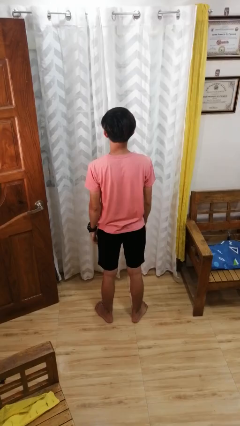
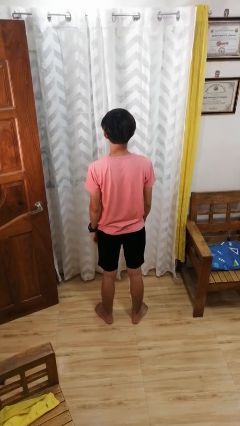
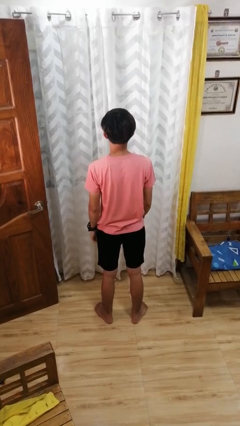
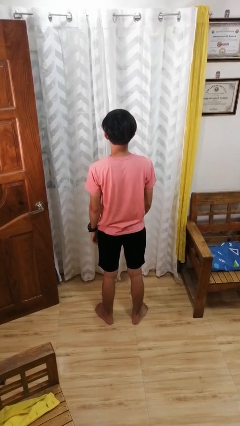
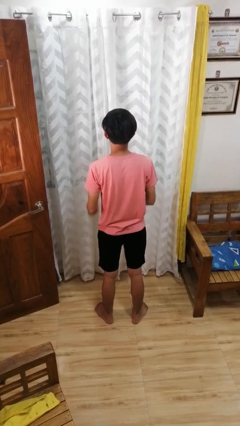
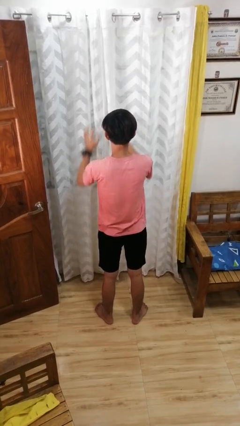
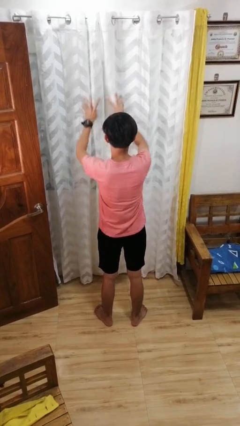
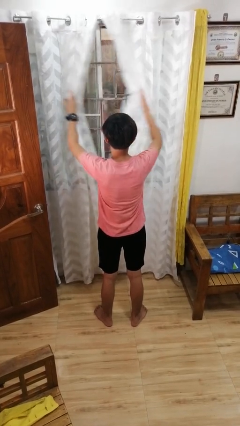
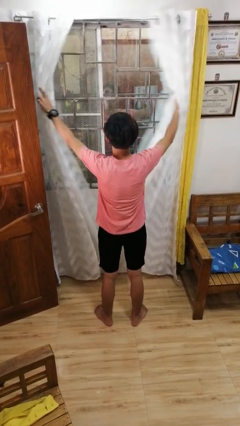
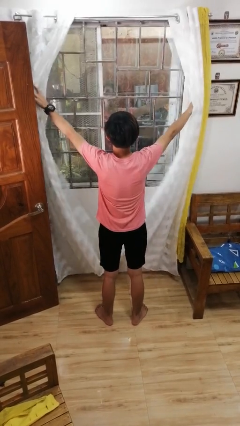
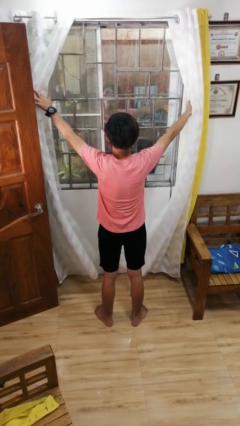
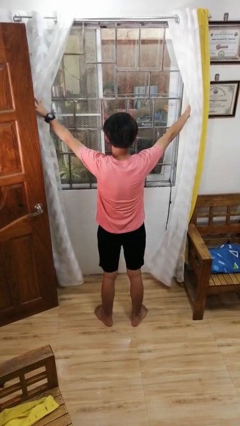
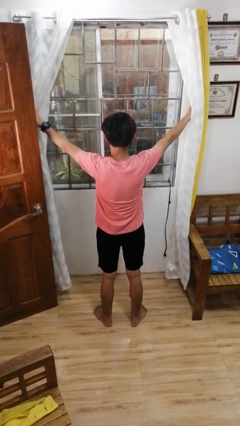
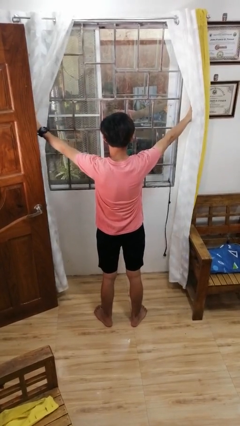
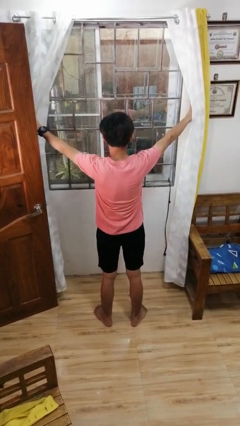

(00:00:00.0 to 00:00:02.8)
person opens curtains

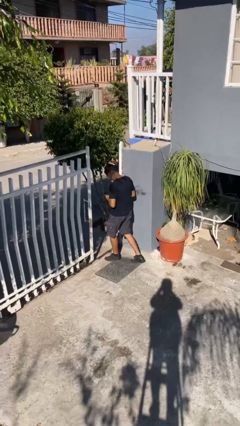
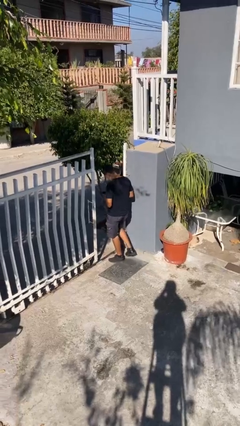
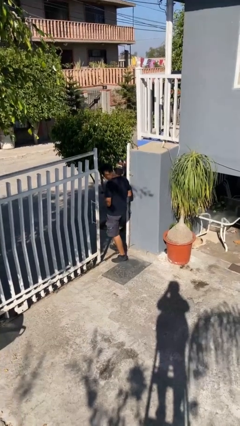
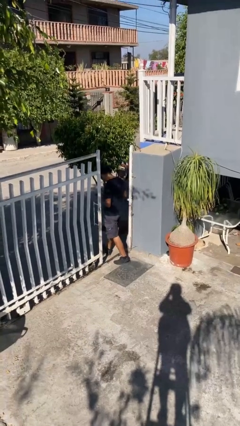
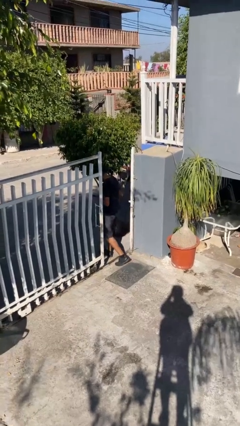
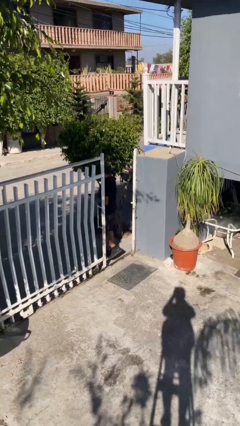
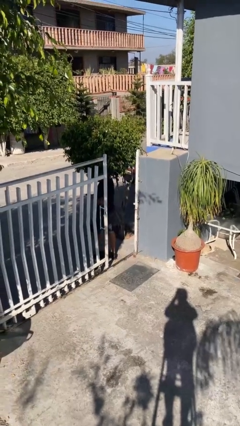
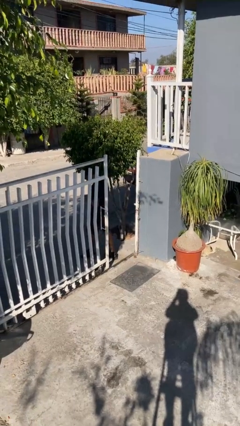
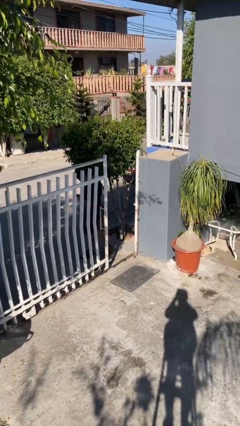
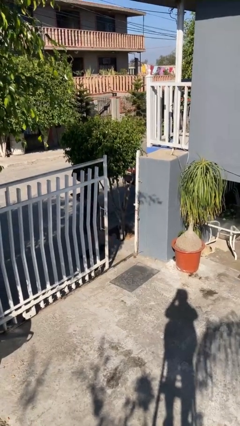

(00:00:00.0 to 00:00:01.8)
person exits scene through structure

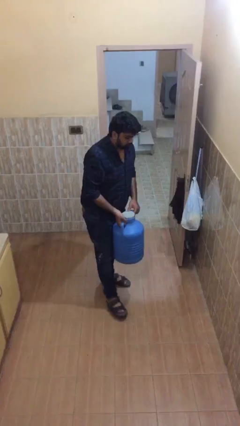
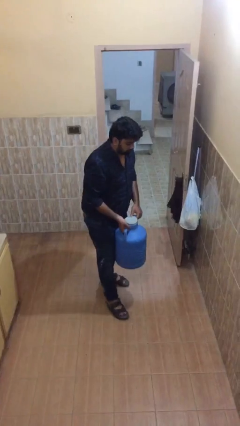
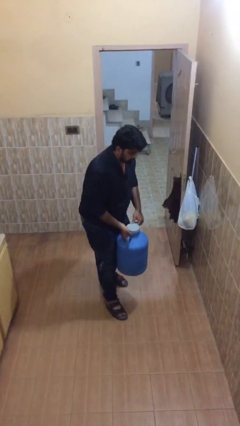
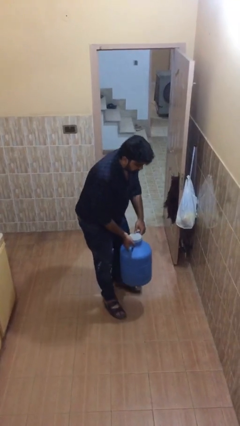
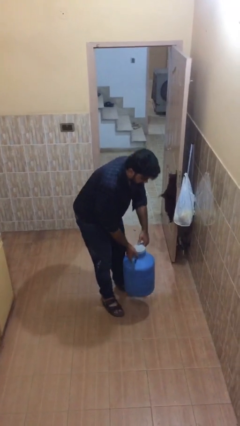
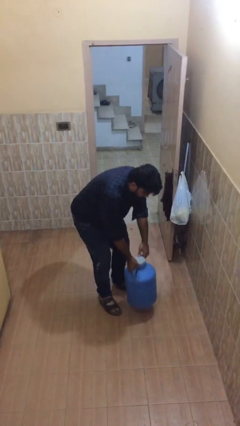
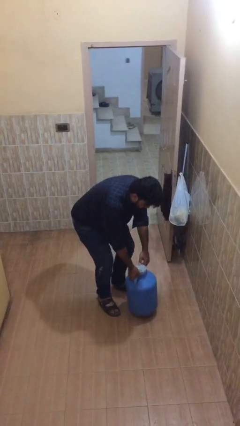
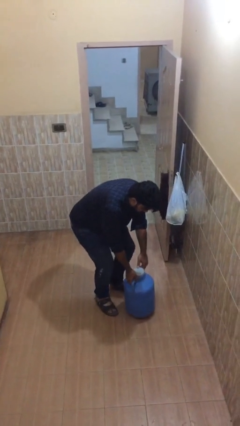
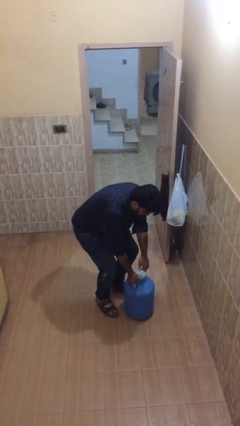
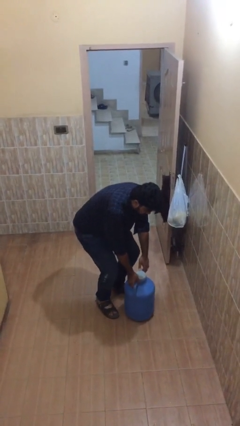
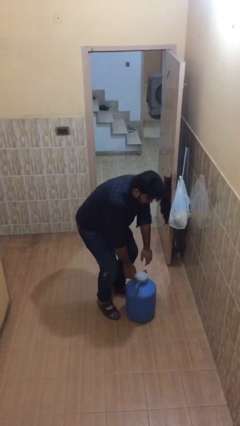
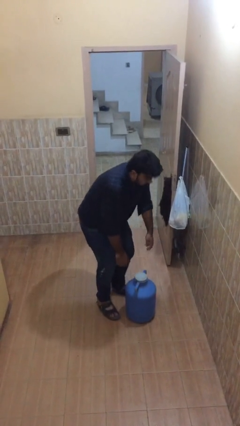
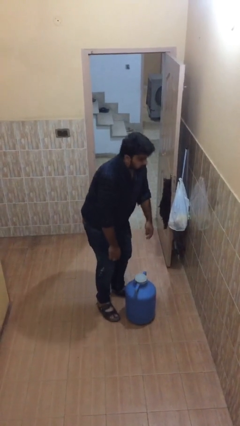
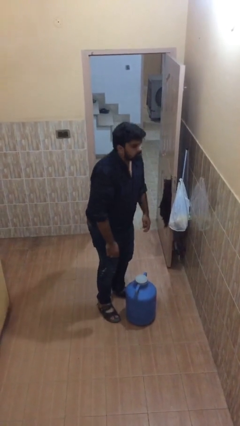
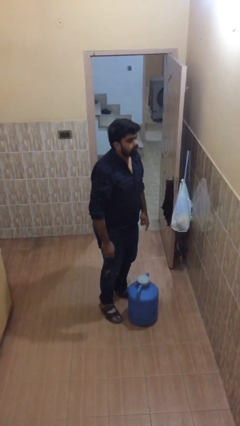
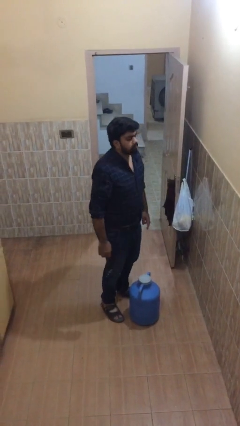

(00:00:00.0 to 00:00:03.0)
person puts down object on floor

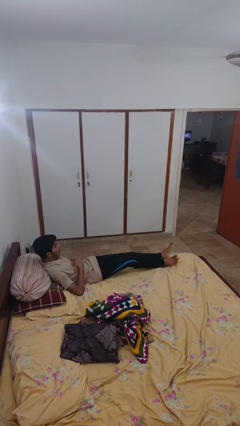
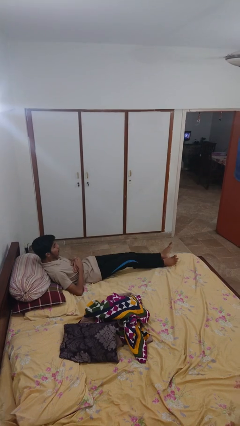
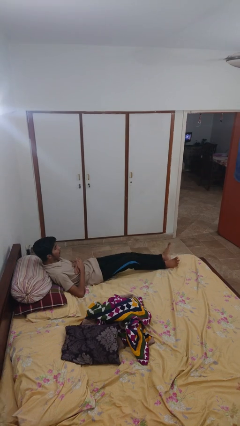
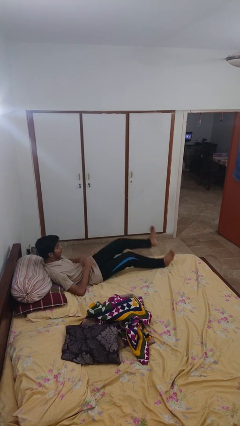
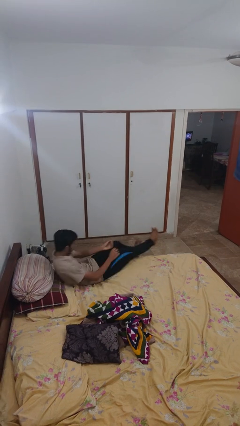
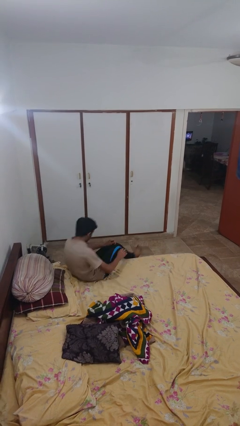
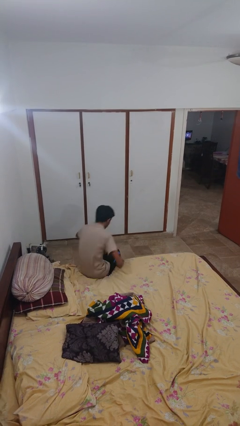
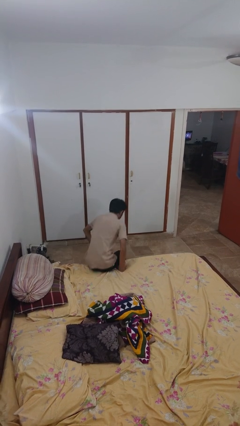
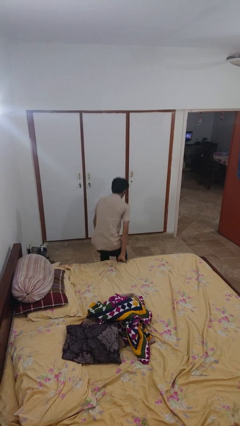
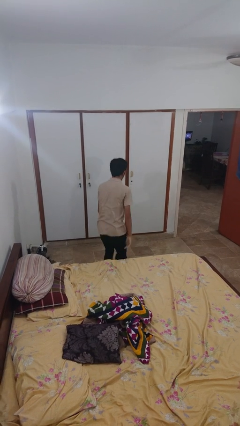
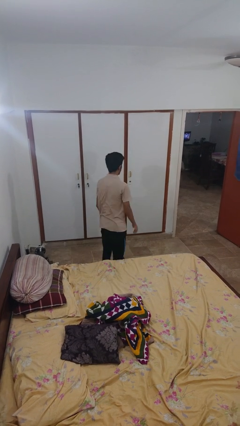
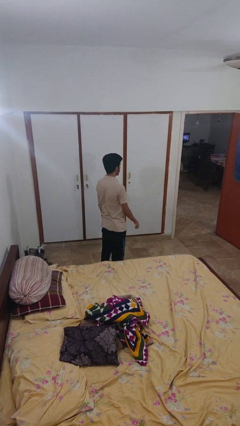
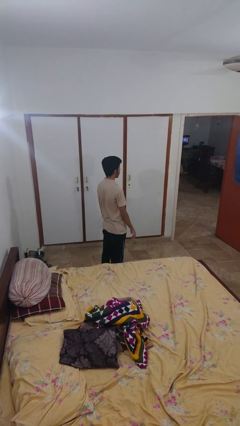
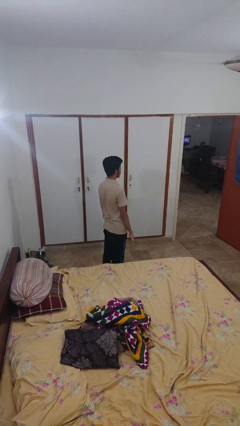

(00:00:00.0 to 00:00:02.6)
person stands up

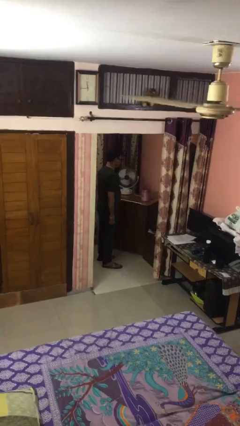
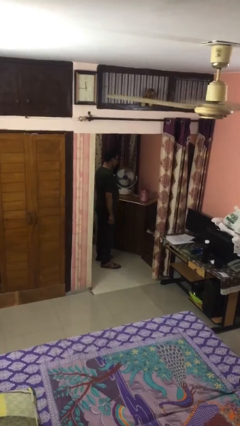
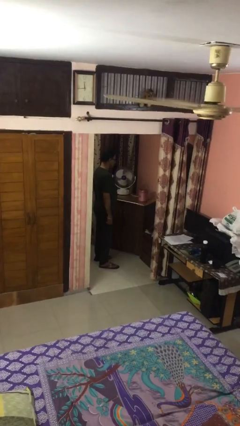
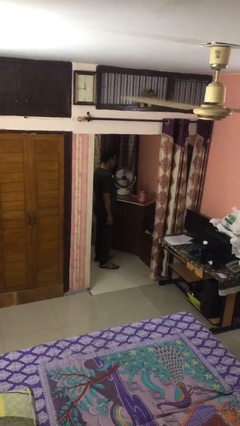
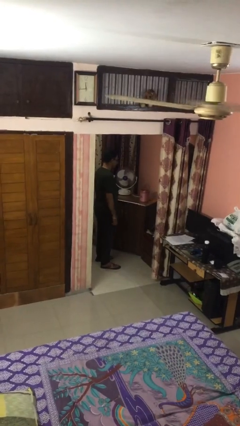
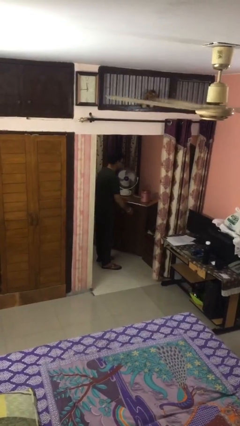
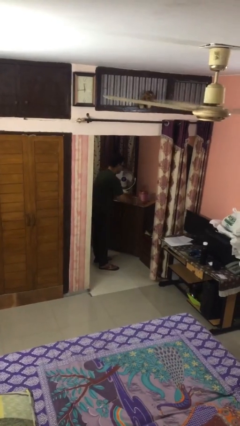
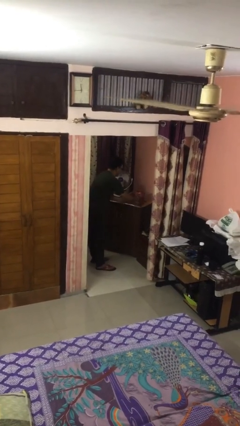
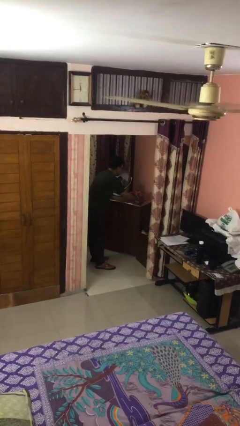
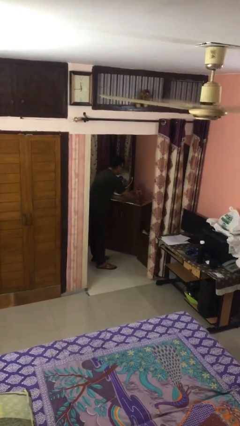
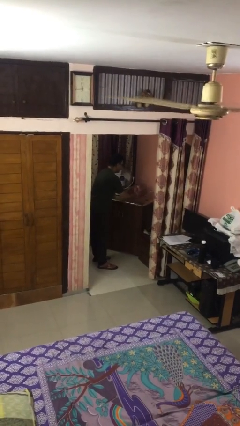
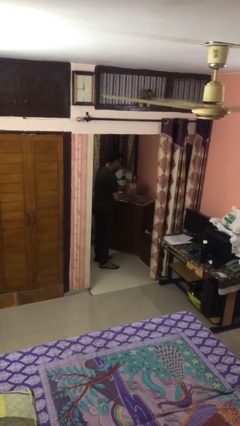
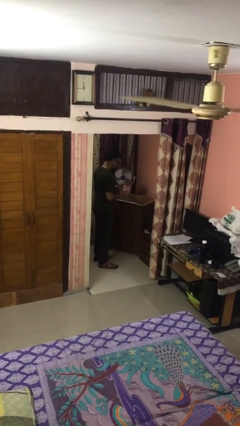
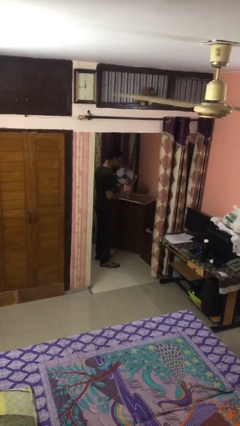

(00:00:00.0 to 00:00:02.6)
person picks up object from countertop

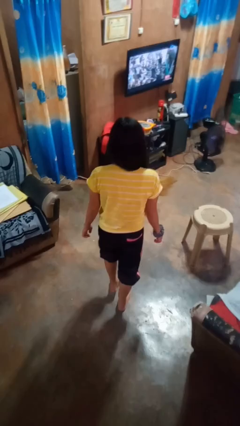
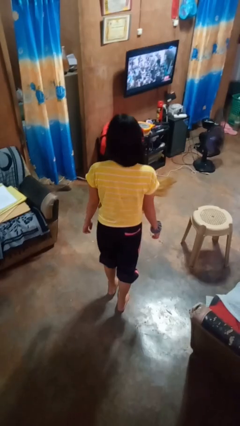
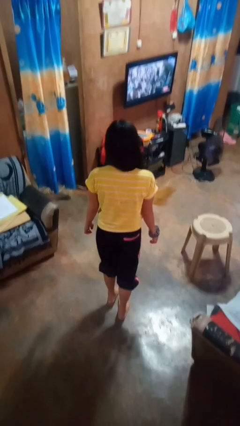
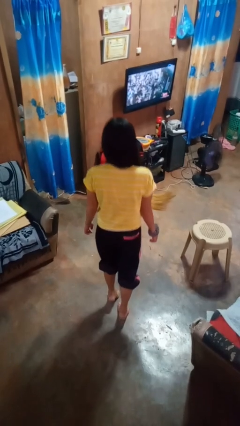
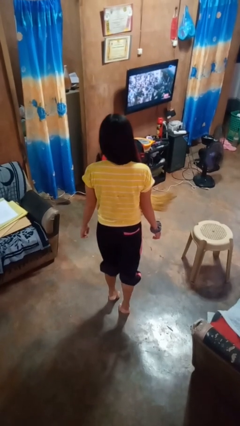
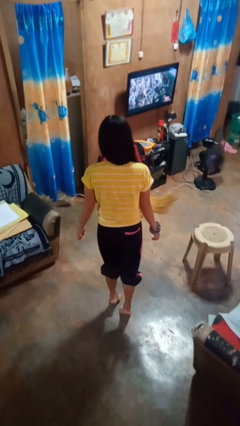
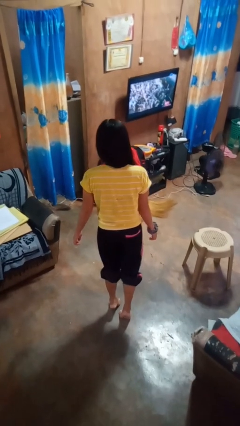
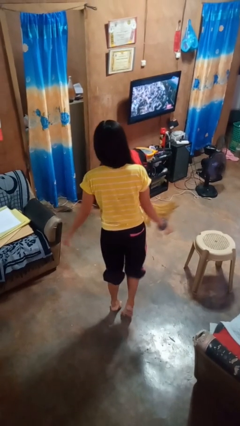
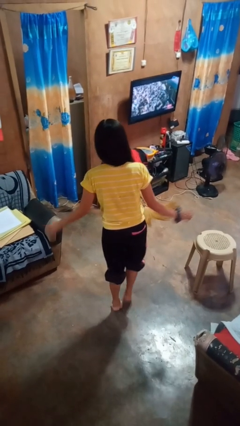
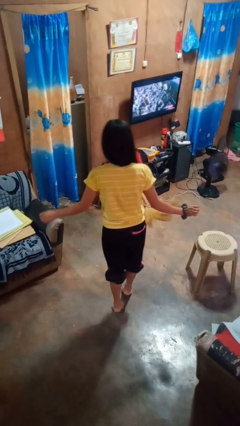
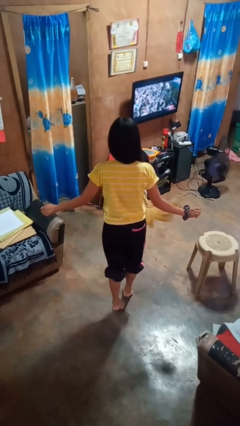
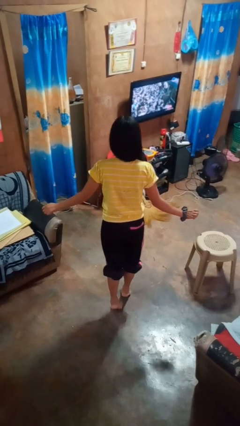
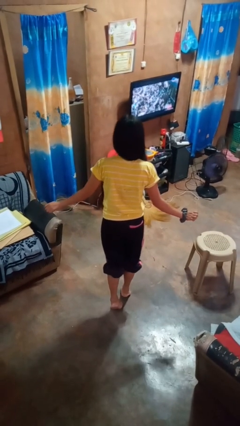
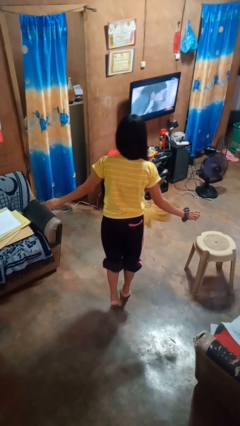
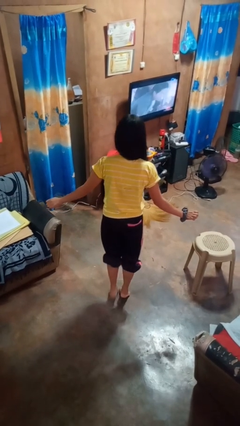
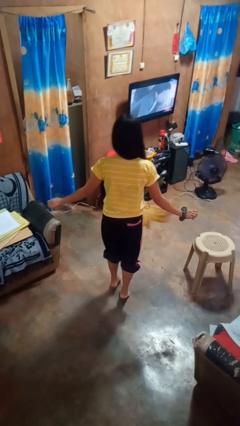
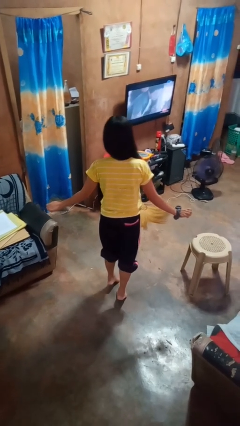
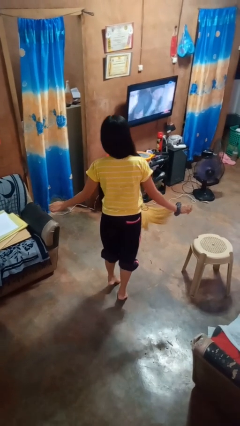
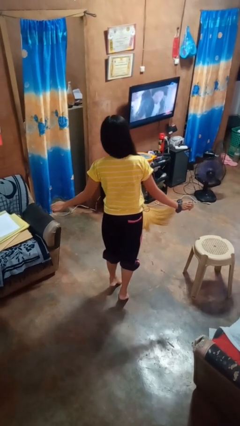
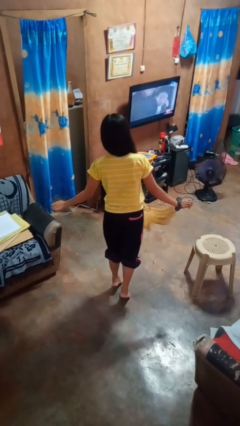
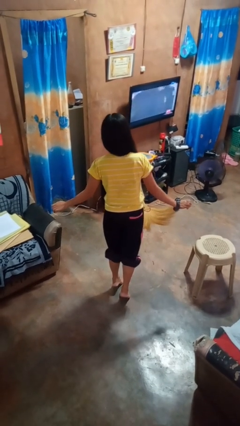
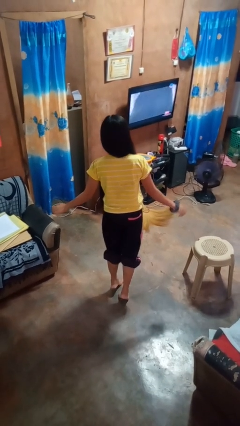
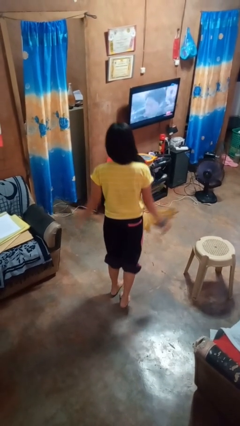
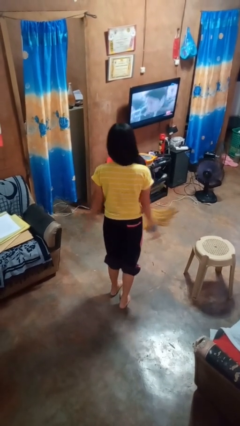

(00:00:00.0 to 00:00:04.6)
person walks tiptoe

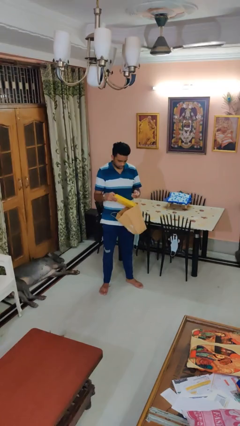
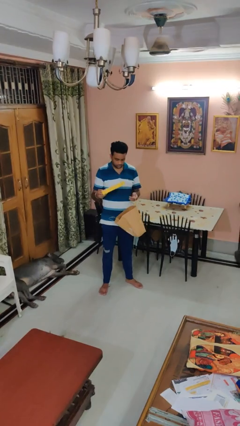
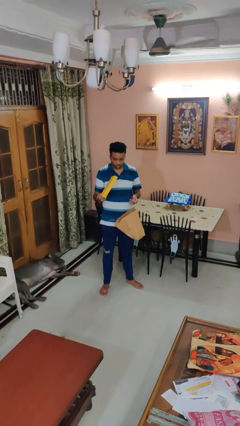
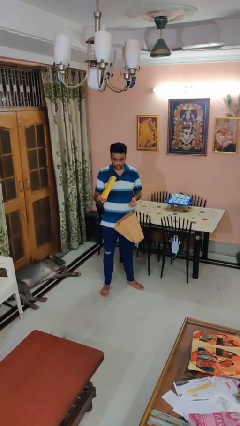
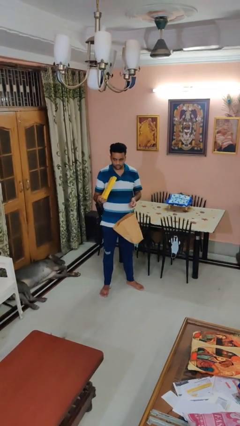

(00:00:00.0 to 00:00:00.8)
person takes object from bag
